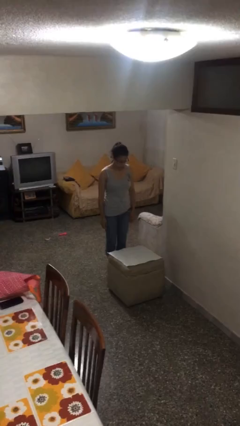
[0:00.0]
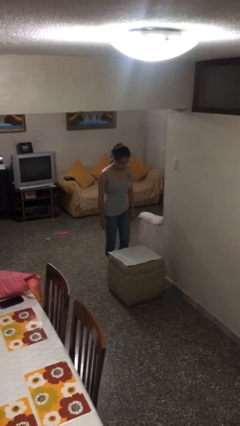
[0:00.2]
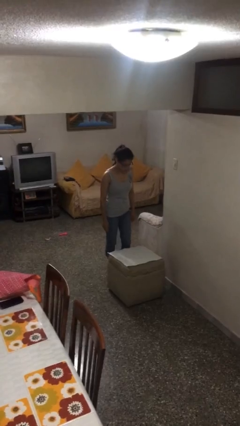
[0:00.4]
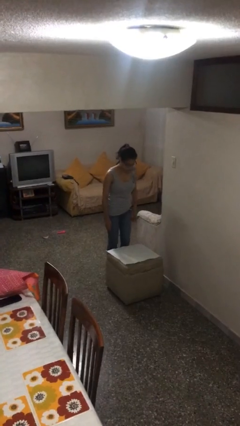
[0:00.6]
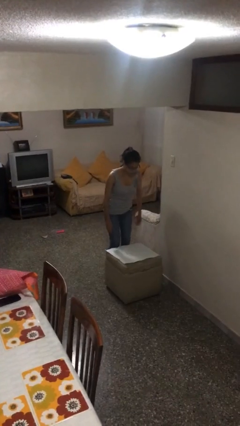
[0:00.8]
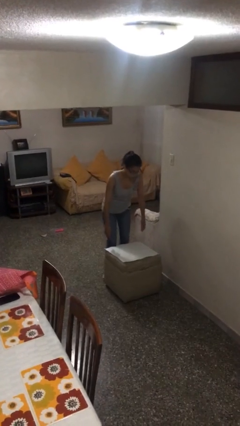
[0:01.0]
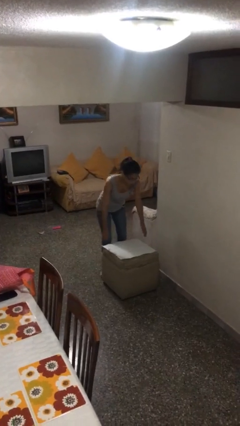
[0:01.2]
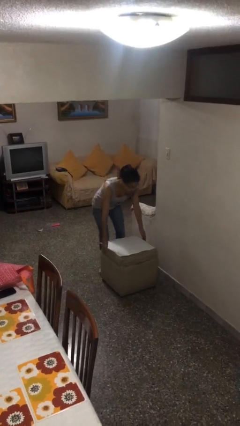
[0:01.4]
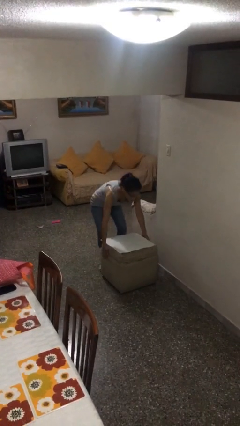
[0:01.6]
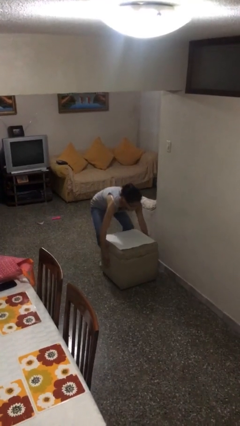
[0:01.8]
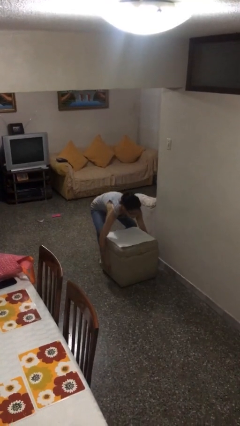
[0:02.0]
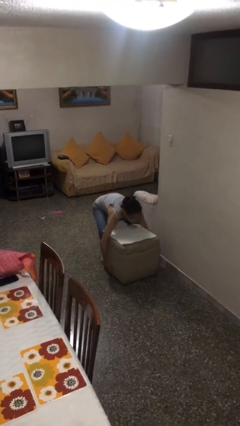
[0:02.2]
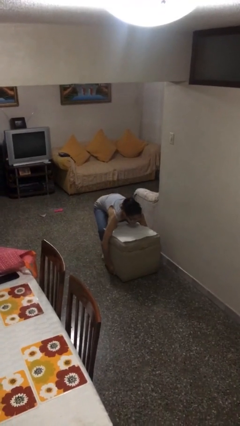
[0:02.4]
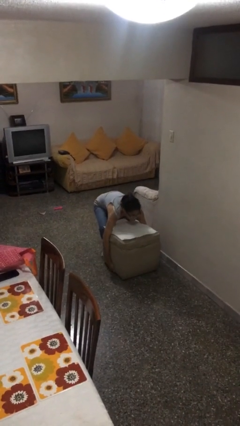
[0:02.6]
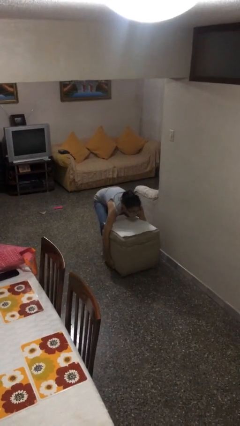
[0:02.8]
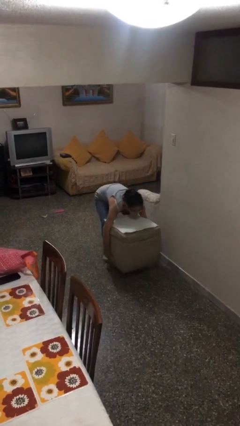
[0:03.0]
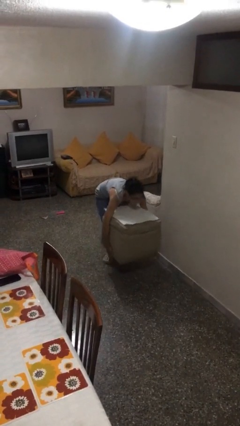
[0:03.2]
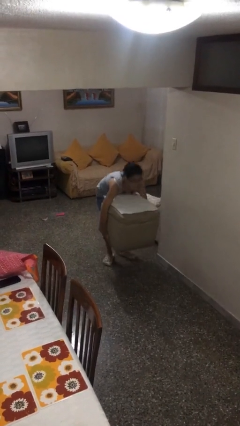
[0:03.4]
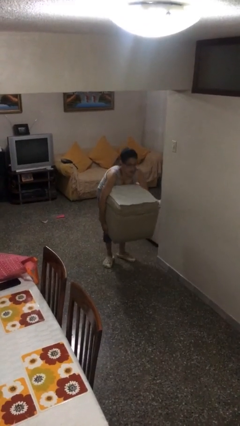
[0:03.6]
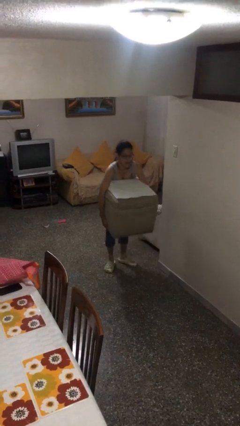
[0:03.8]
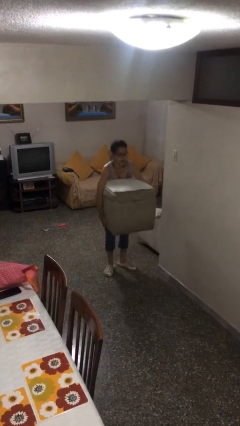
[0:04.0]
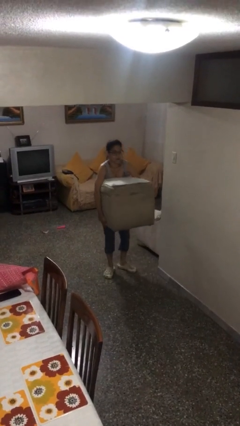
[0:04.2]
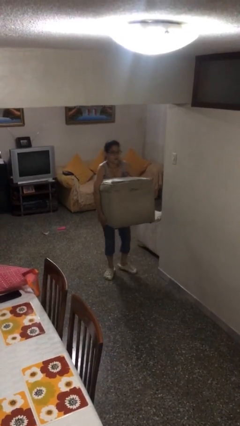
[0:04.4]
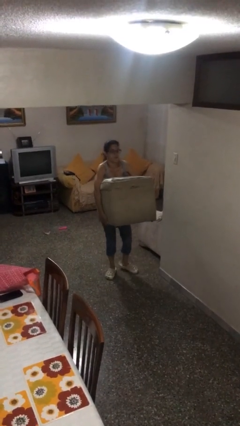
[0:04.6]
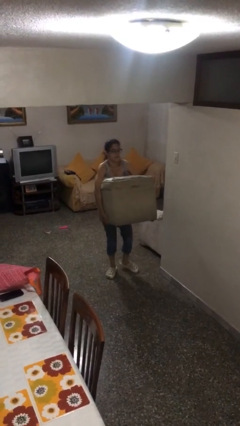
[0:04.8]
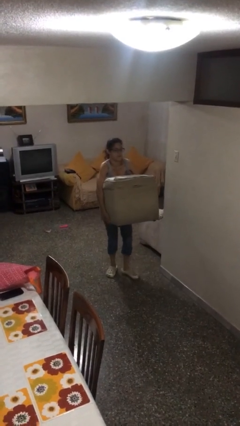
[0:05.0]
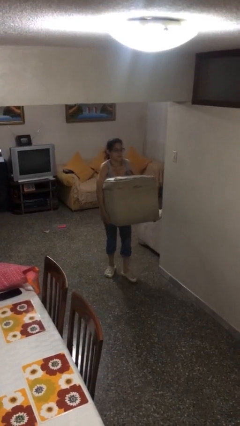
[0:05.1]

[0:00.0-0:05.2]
person picks up object from floor

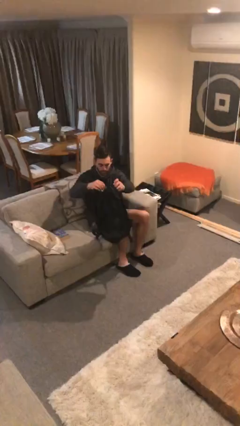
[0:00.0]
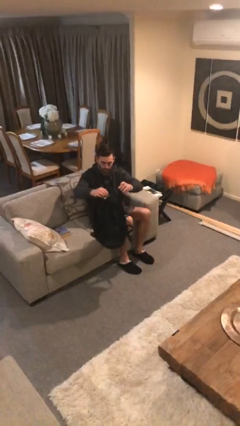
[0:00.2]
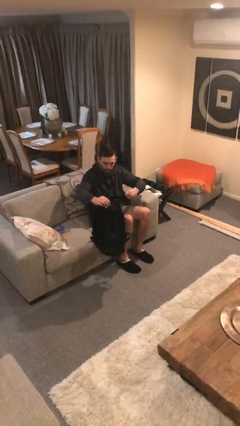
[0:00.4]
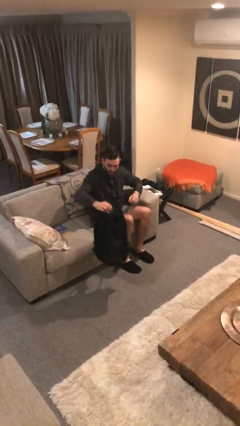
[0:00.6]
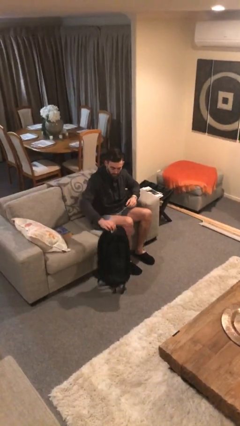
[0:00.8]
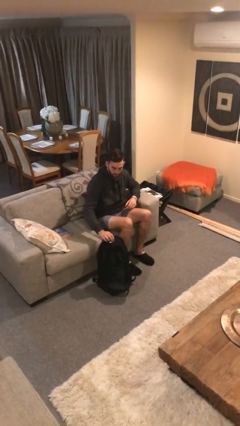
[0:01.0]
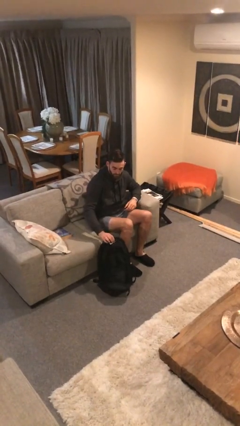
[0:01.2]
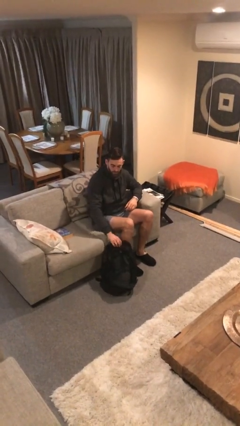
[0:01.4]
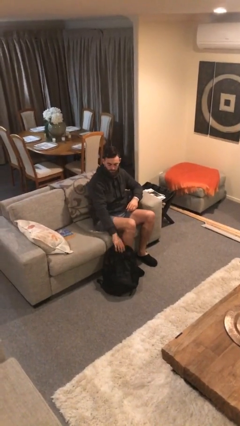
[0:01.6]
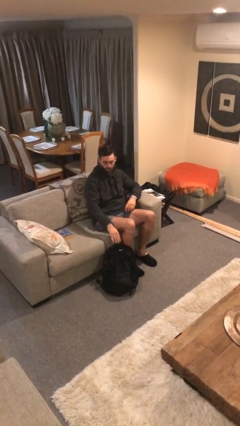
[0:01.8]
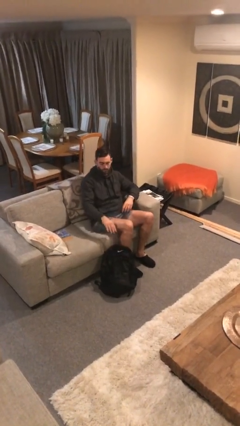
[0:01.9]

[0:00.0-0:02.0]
person puts down object on floor

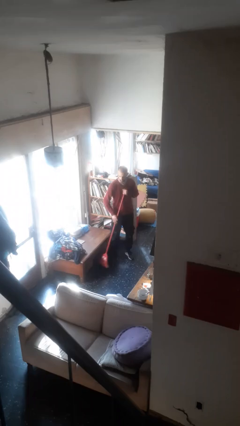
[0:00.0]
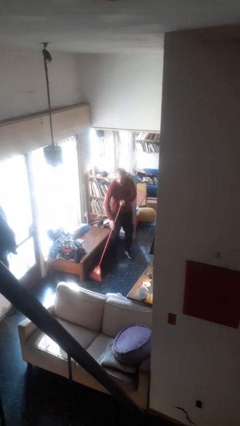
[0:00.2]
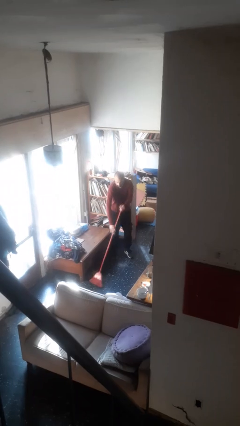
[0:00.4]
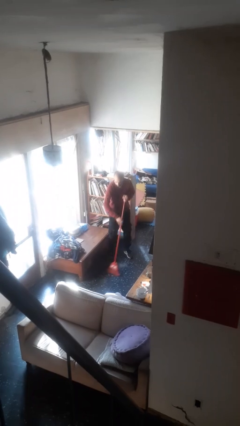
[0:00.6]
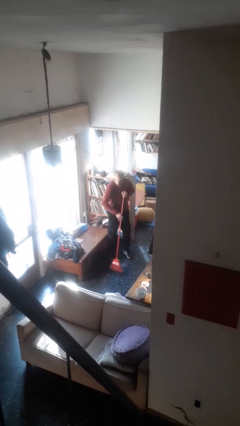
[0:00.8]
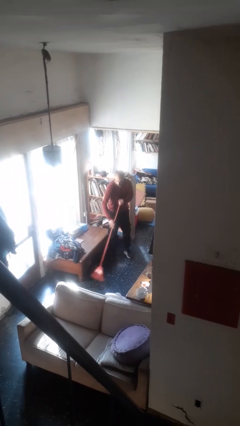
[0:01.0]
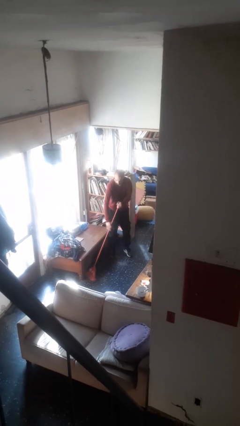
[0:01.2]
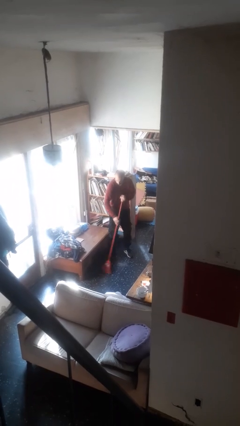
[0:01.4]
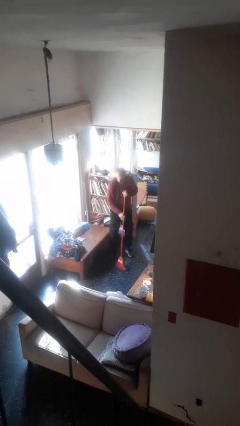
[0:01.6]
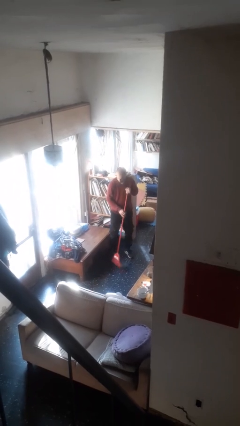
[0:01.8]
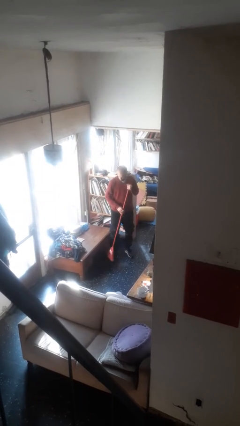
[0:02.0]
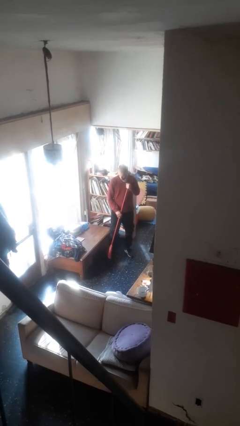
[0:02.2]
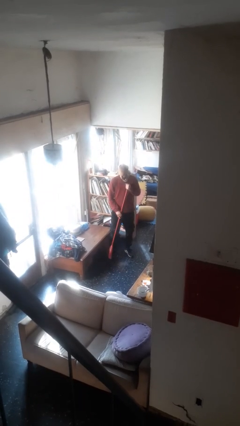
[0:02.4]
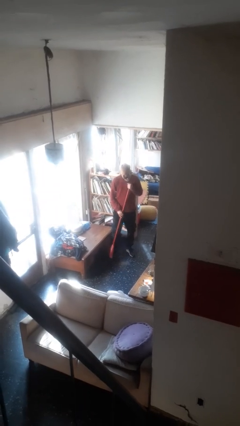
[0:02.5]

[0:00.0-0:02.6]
person sweeps floor

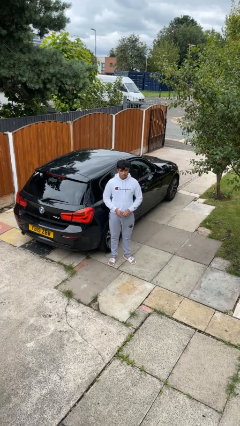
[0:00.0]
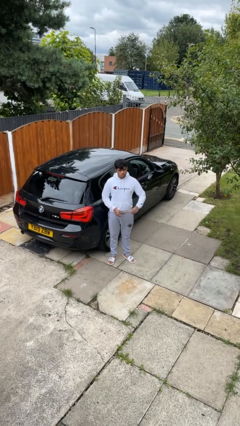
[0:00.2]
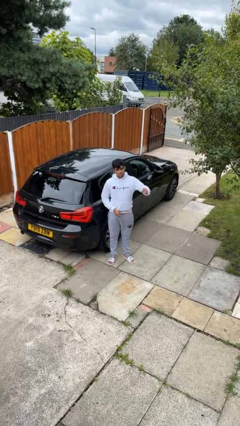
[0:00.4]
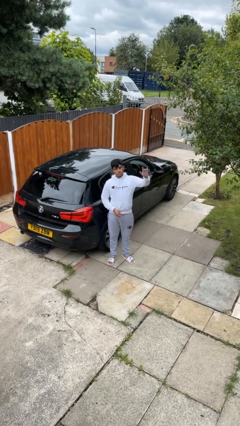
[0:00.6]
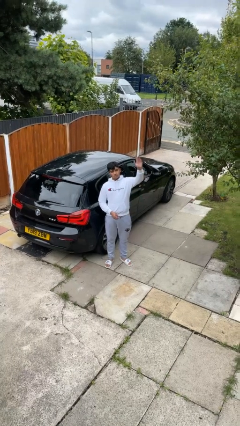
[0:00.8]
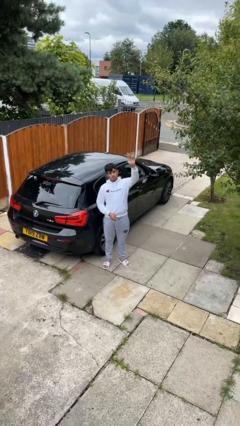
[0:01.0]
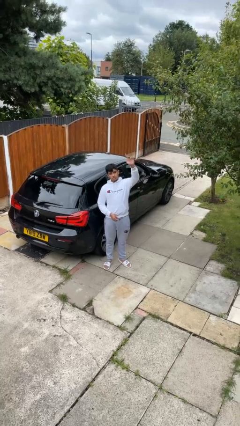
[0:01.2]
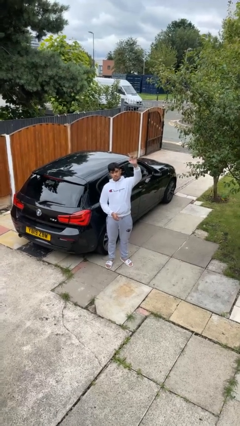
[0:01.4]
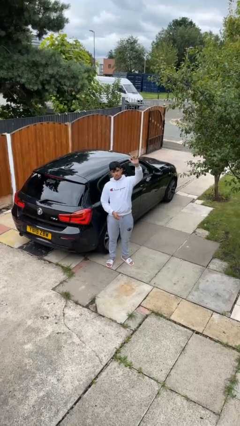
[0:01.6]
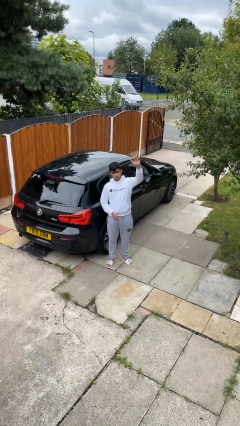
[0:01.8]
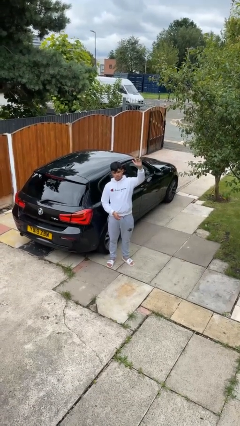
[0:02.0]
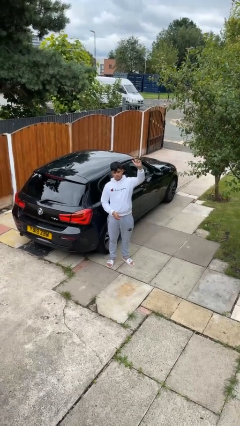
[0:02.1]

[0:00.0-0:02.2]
person gestures raise hand

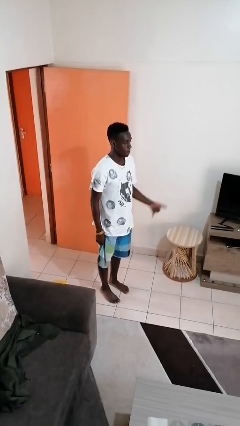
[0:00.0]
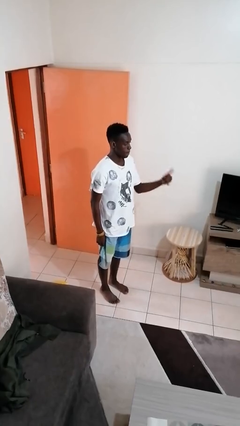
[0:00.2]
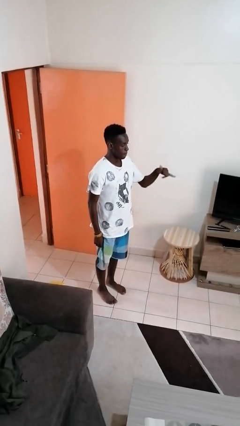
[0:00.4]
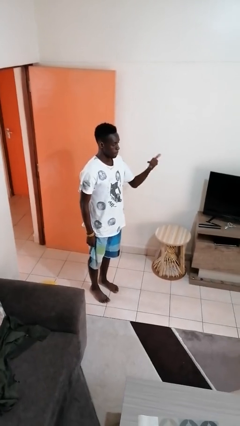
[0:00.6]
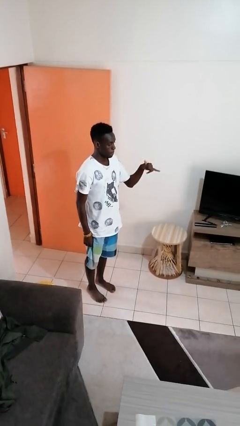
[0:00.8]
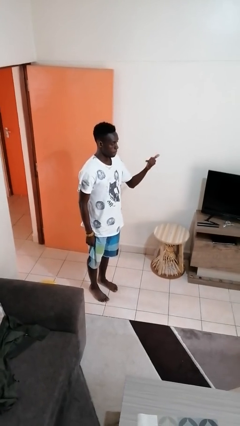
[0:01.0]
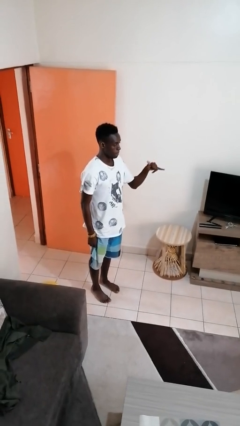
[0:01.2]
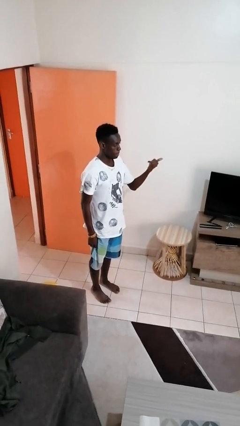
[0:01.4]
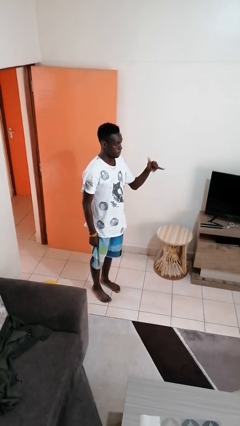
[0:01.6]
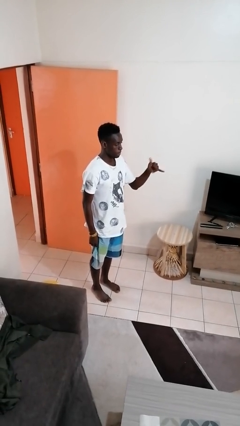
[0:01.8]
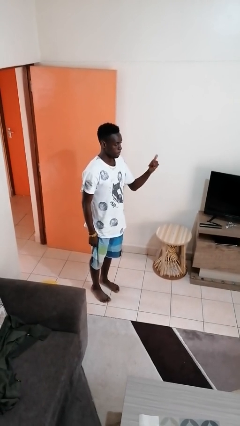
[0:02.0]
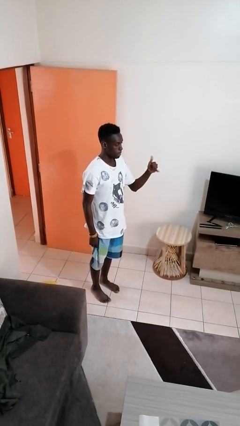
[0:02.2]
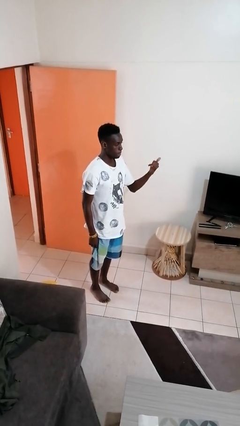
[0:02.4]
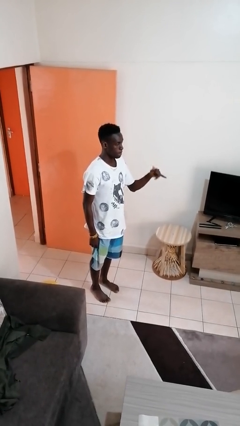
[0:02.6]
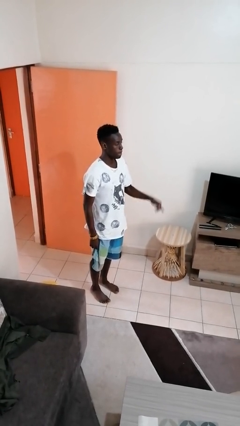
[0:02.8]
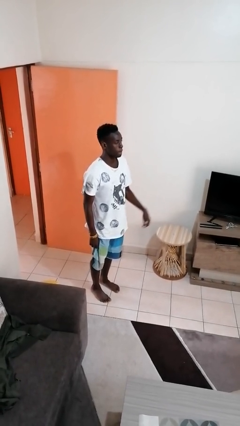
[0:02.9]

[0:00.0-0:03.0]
person gestures hang loose

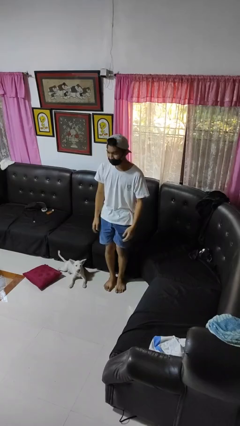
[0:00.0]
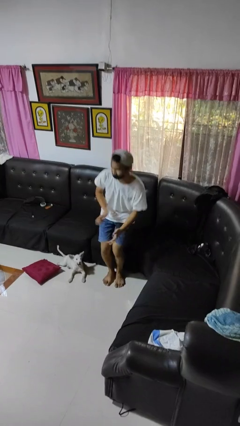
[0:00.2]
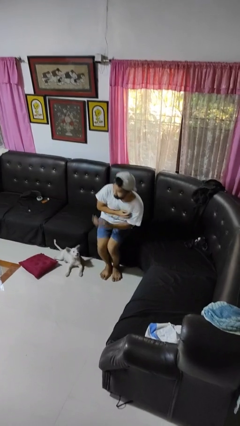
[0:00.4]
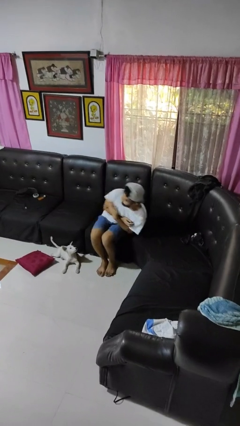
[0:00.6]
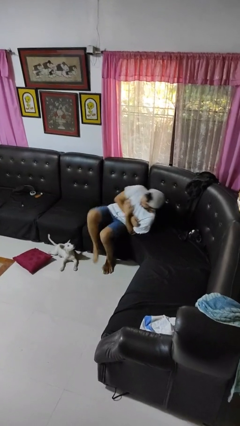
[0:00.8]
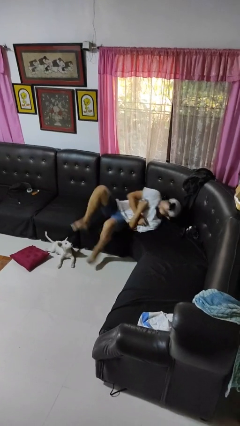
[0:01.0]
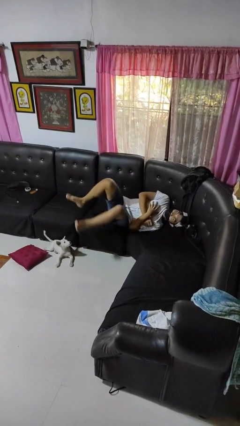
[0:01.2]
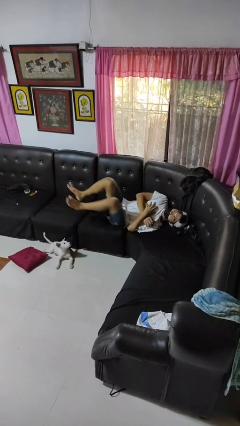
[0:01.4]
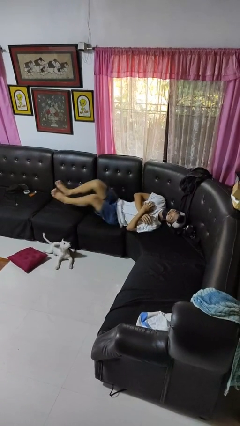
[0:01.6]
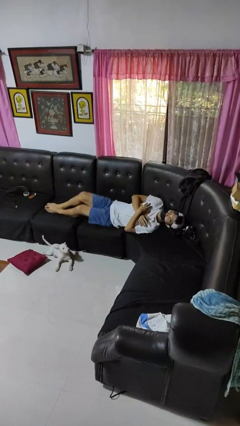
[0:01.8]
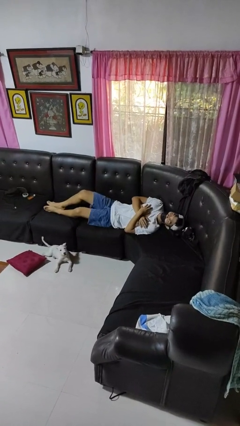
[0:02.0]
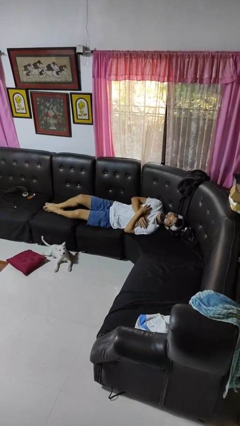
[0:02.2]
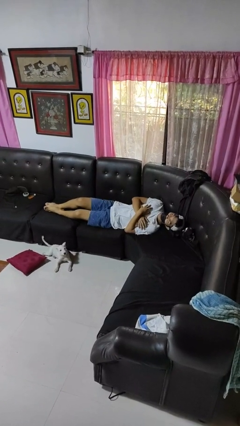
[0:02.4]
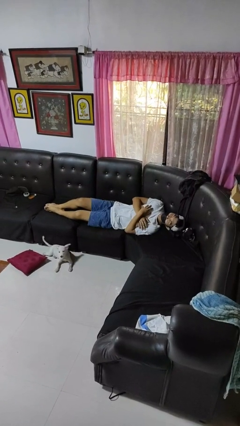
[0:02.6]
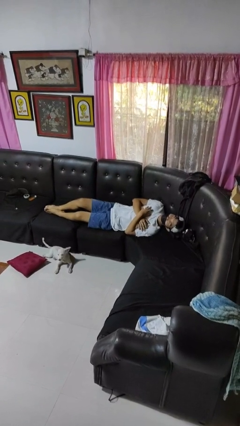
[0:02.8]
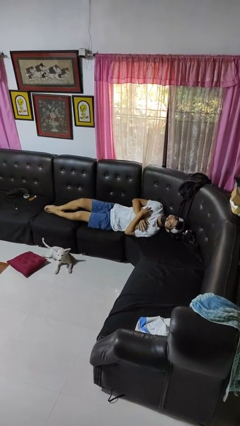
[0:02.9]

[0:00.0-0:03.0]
person lies down on couch
